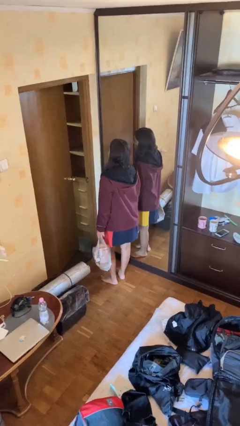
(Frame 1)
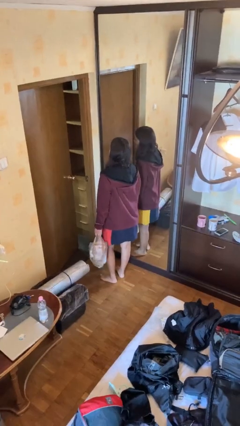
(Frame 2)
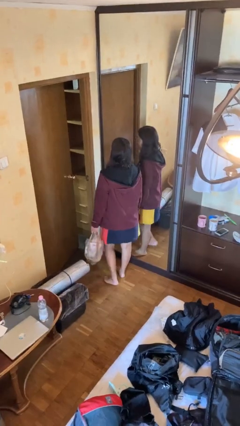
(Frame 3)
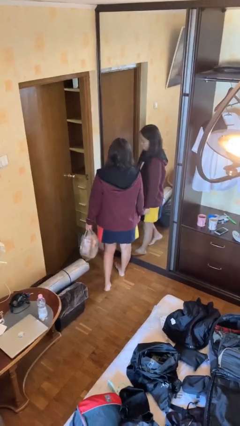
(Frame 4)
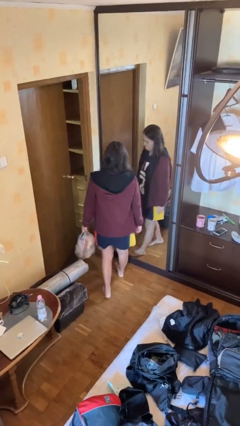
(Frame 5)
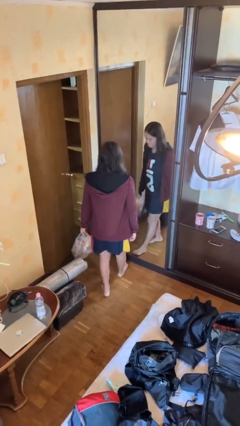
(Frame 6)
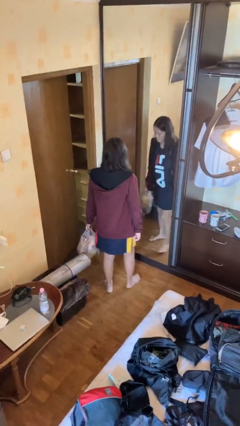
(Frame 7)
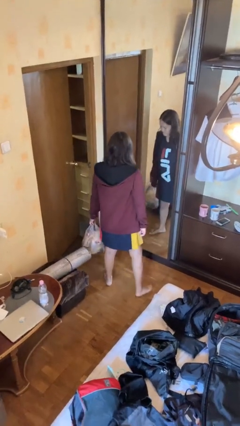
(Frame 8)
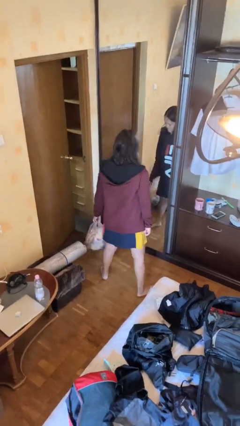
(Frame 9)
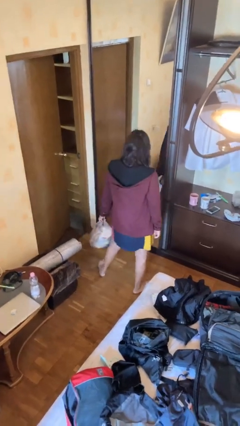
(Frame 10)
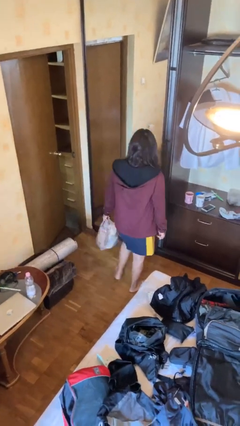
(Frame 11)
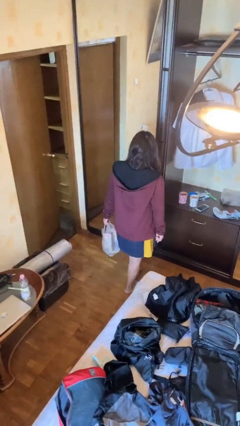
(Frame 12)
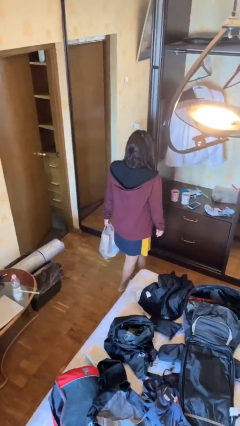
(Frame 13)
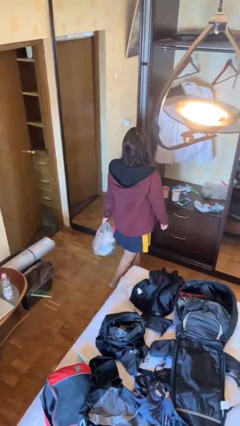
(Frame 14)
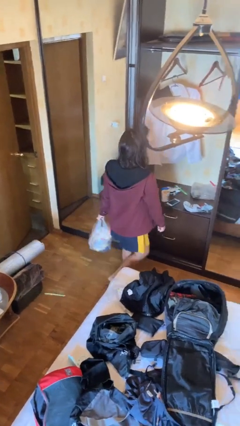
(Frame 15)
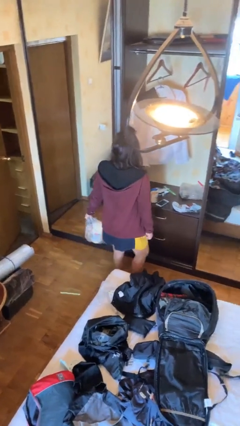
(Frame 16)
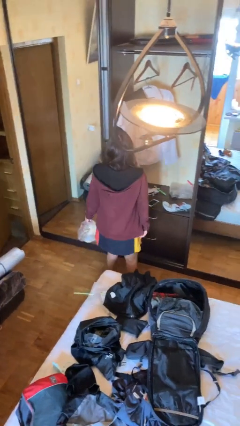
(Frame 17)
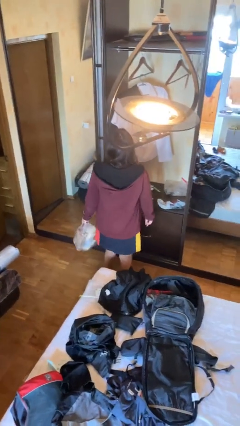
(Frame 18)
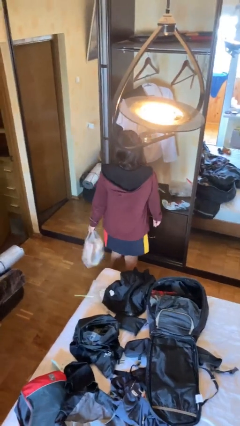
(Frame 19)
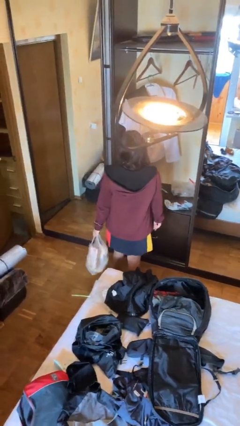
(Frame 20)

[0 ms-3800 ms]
person carries groceries

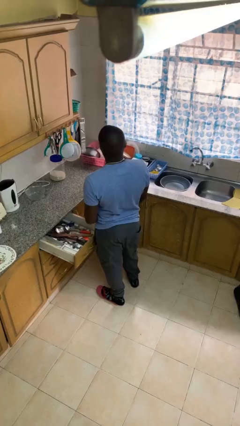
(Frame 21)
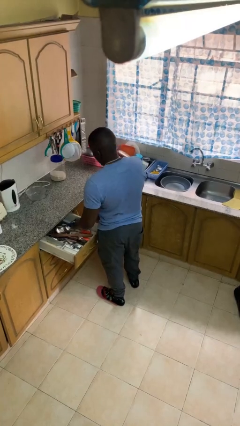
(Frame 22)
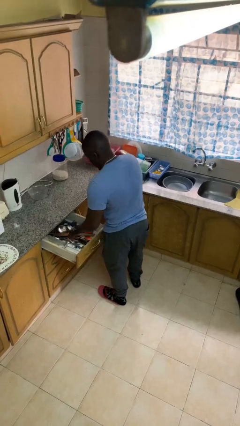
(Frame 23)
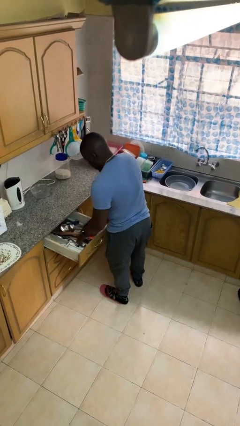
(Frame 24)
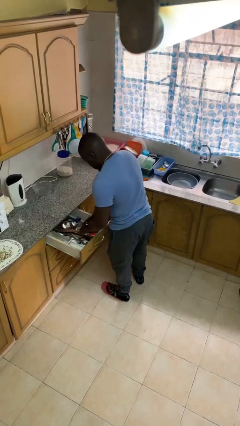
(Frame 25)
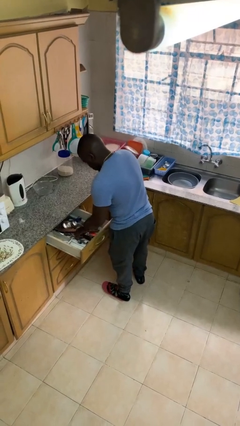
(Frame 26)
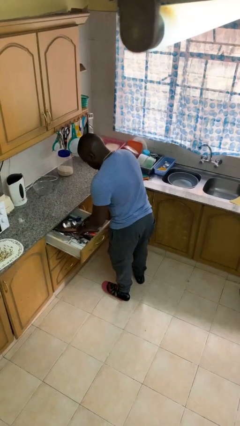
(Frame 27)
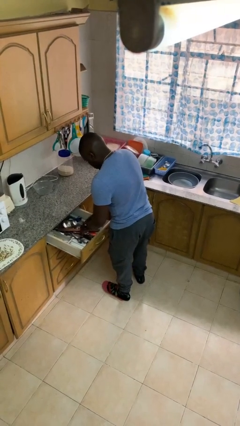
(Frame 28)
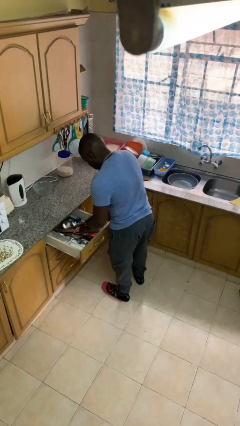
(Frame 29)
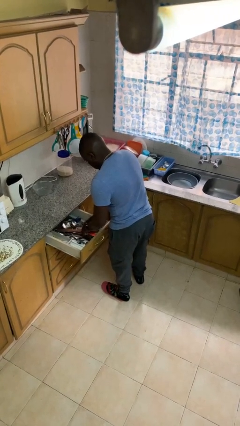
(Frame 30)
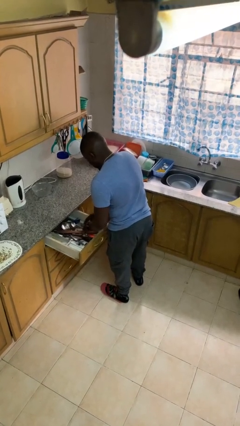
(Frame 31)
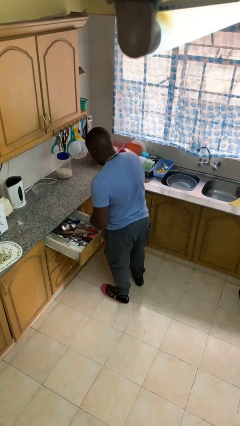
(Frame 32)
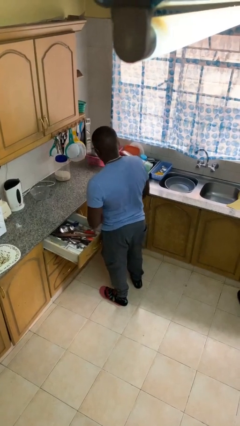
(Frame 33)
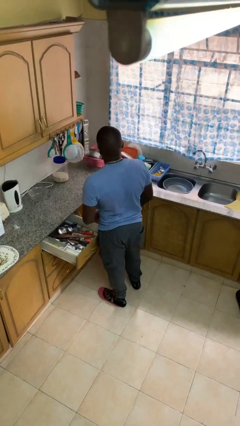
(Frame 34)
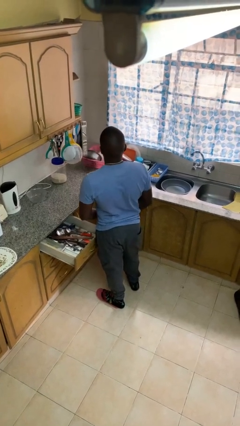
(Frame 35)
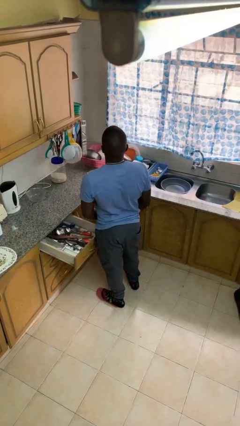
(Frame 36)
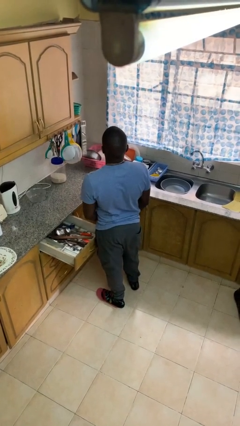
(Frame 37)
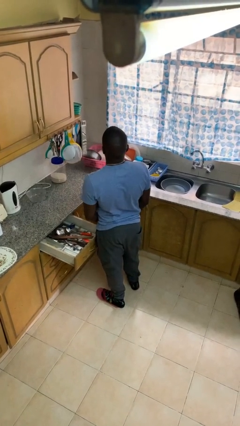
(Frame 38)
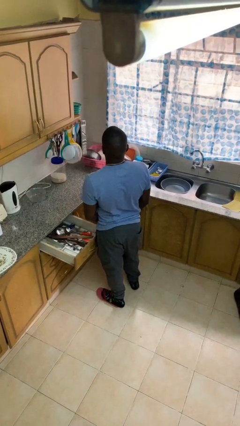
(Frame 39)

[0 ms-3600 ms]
person searches in kitchen drawer

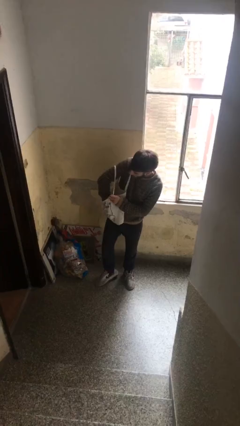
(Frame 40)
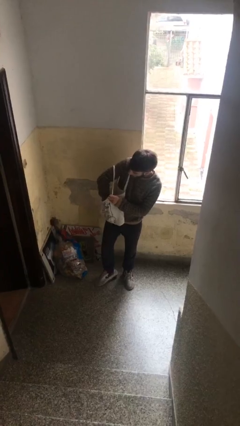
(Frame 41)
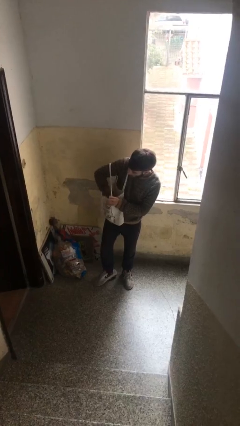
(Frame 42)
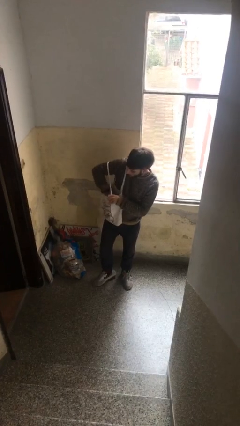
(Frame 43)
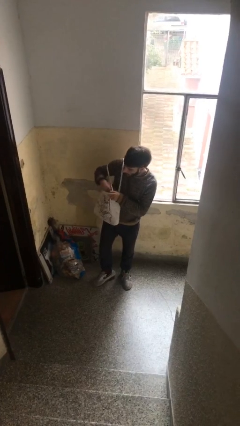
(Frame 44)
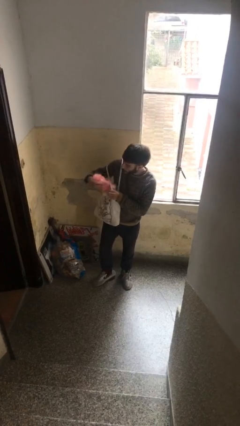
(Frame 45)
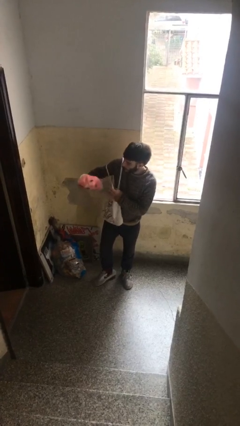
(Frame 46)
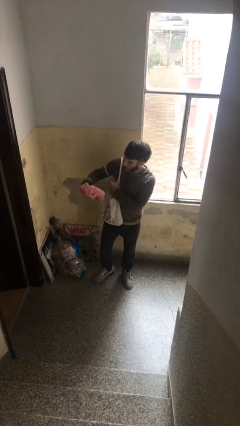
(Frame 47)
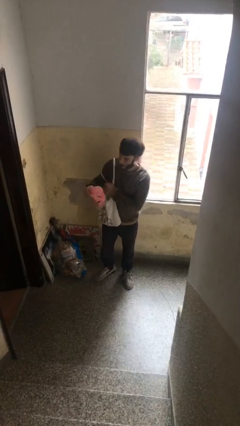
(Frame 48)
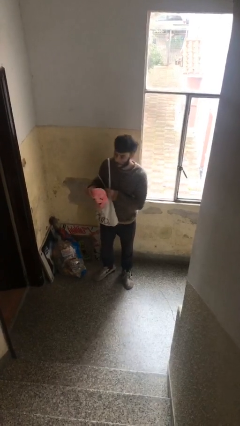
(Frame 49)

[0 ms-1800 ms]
person takes object from purse

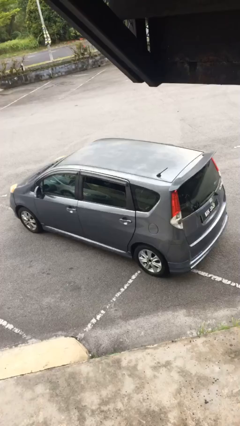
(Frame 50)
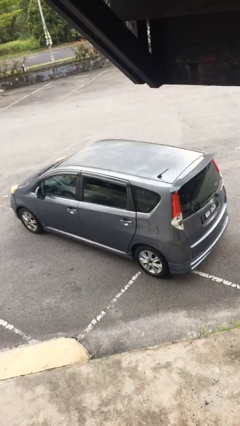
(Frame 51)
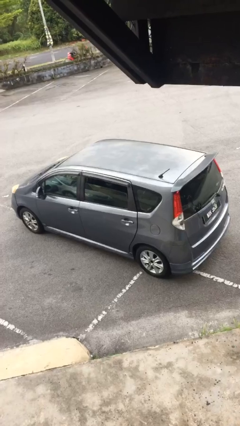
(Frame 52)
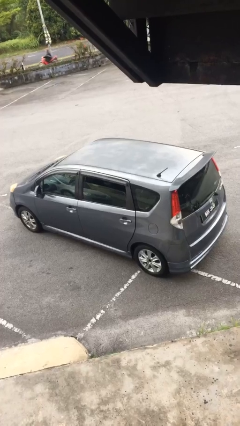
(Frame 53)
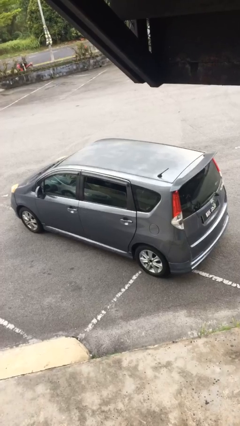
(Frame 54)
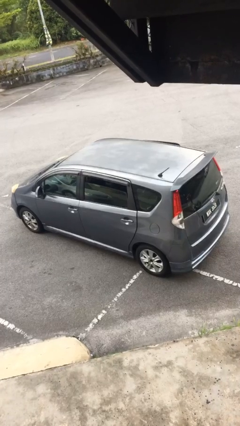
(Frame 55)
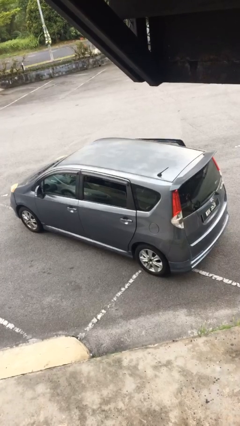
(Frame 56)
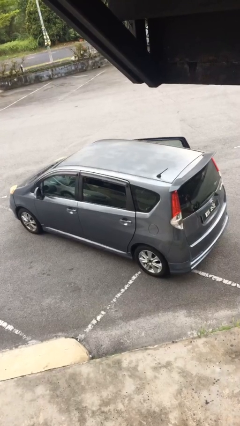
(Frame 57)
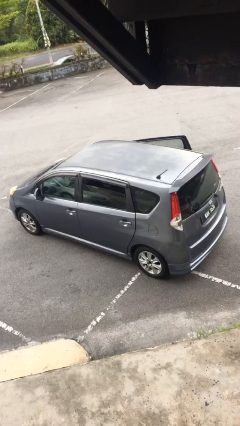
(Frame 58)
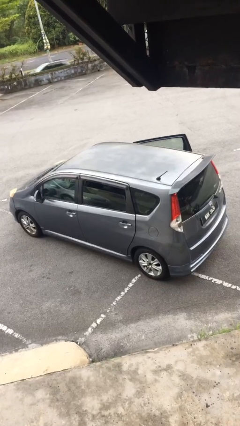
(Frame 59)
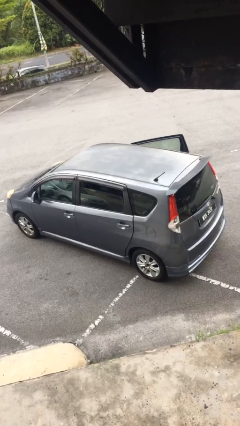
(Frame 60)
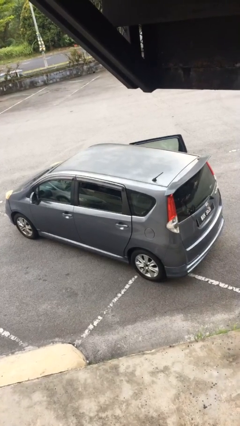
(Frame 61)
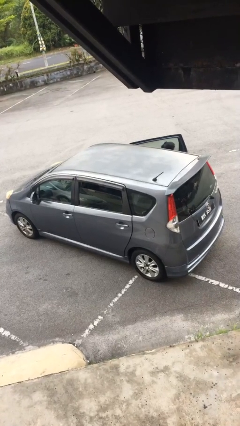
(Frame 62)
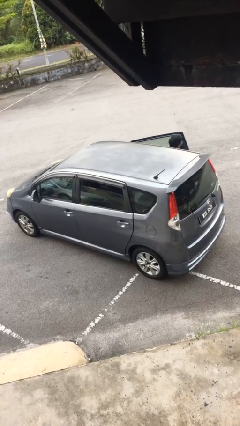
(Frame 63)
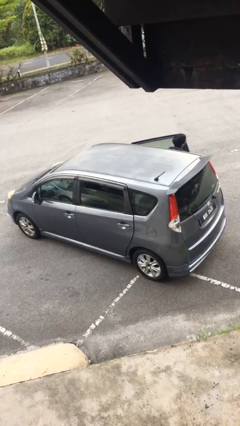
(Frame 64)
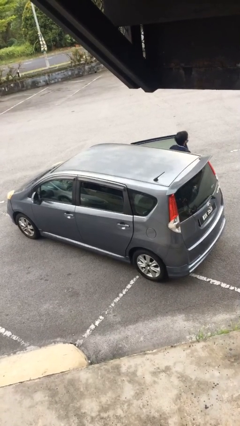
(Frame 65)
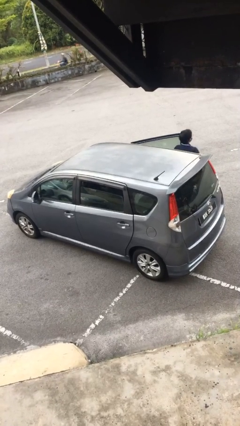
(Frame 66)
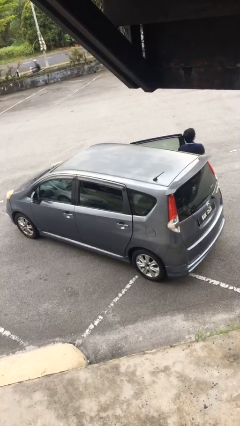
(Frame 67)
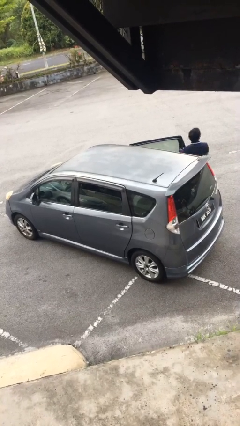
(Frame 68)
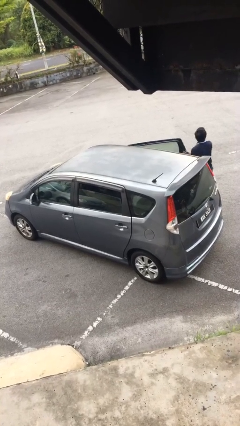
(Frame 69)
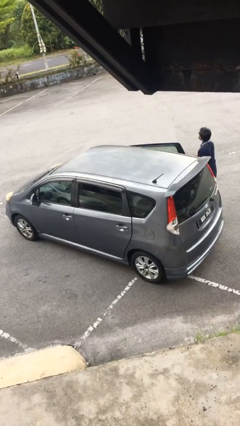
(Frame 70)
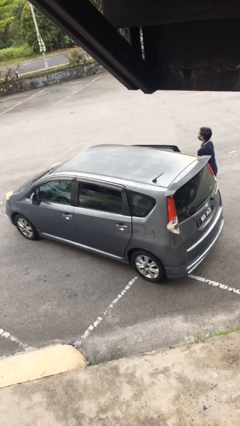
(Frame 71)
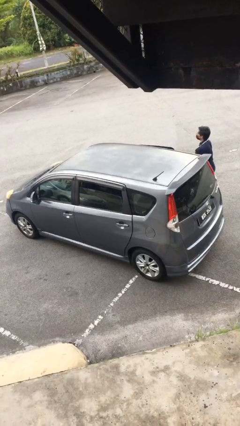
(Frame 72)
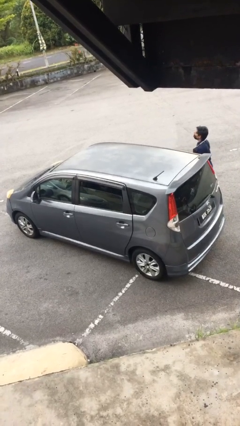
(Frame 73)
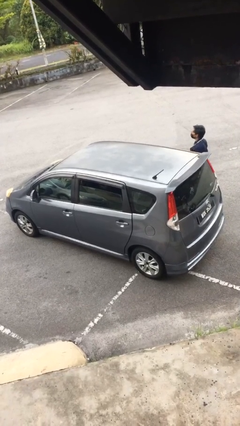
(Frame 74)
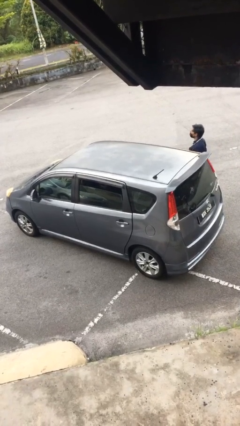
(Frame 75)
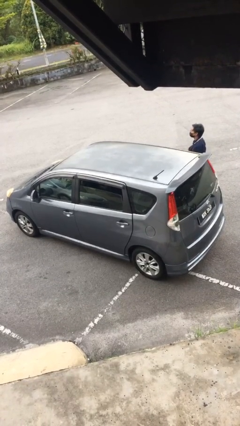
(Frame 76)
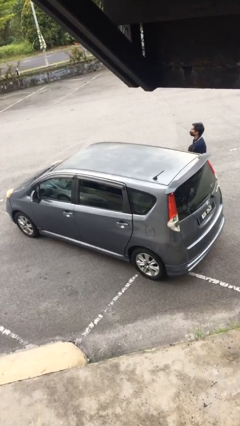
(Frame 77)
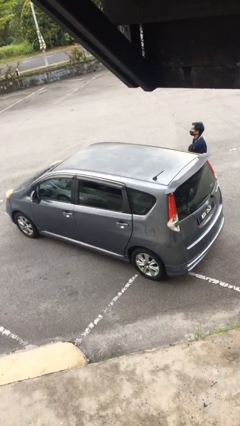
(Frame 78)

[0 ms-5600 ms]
car drops off person

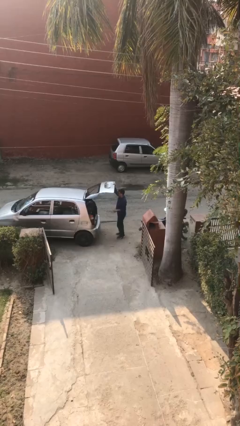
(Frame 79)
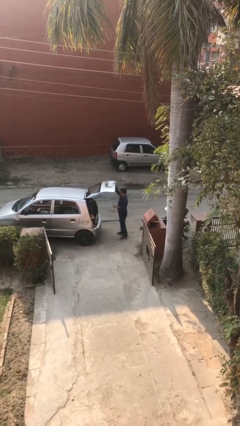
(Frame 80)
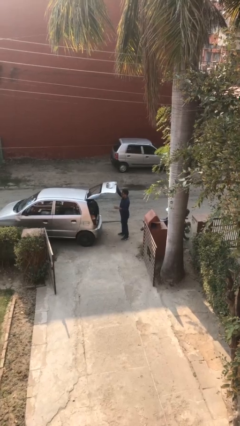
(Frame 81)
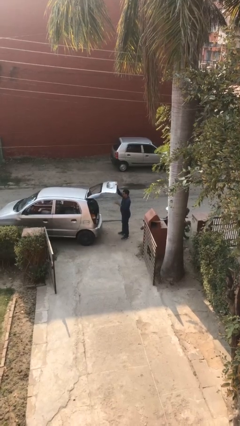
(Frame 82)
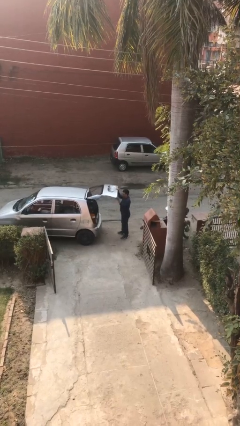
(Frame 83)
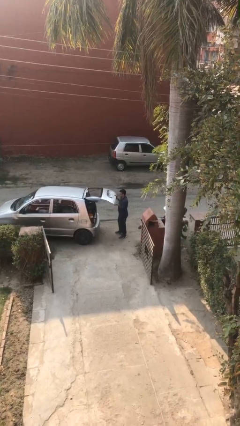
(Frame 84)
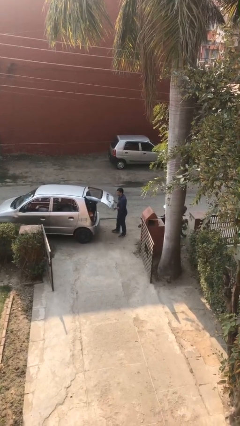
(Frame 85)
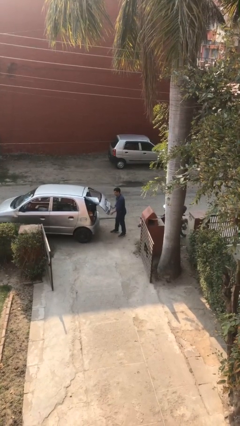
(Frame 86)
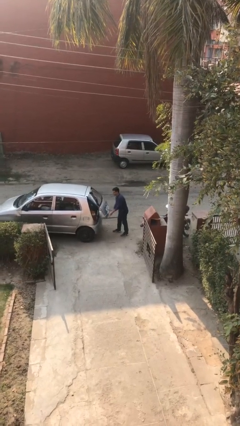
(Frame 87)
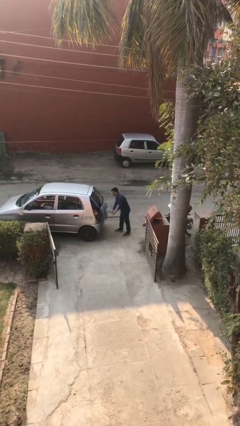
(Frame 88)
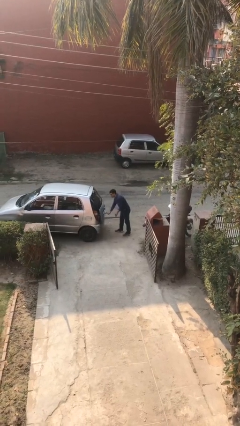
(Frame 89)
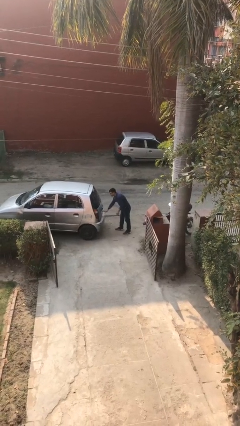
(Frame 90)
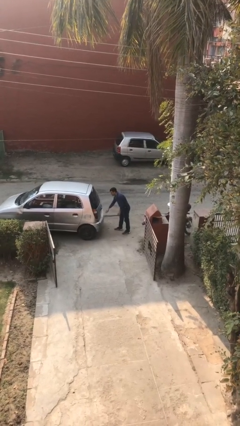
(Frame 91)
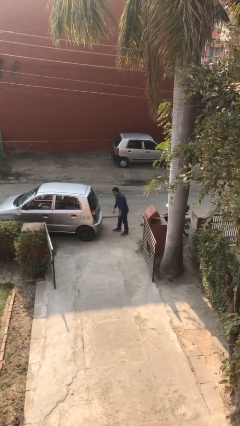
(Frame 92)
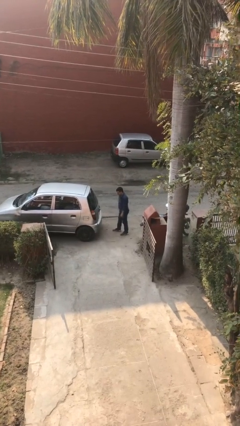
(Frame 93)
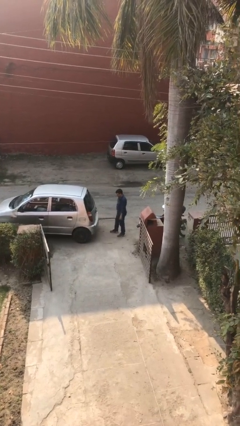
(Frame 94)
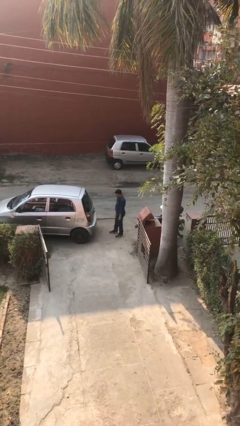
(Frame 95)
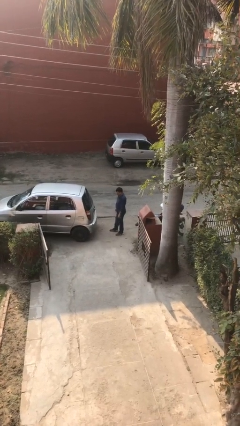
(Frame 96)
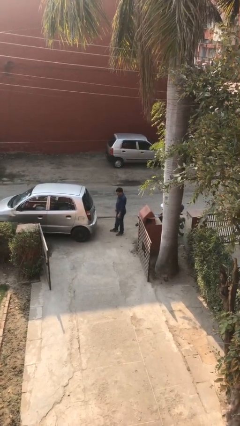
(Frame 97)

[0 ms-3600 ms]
person closes car trunk
